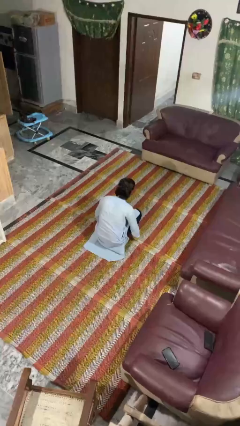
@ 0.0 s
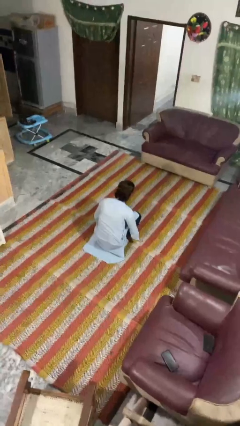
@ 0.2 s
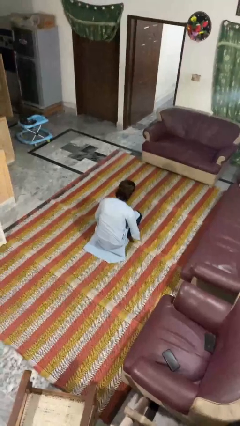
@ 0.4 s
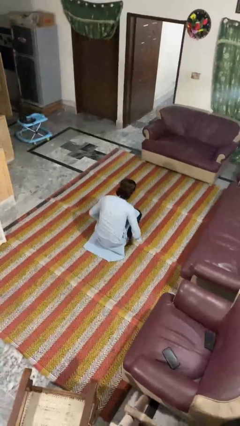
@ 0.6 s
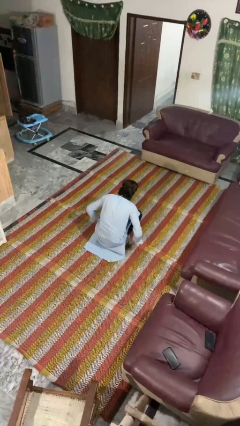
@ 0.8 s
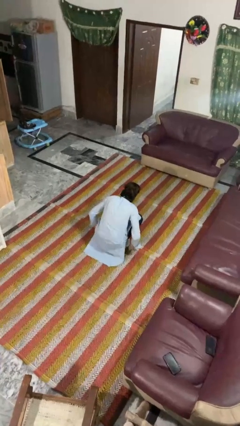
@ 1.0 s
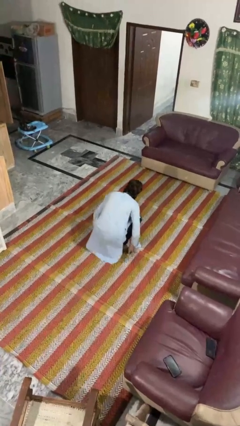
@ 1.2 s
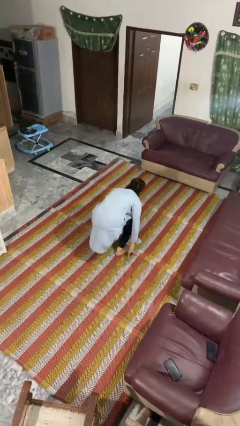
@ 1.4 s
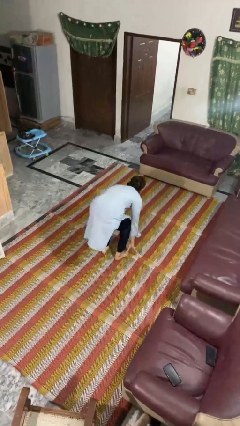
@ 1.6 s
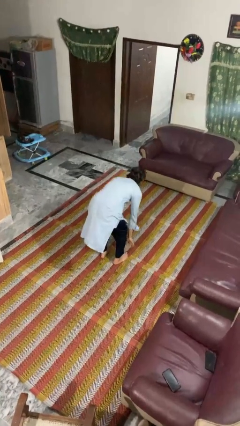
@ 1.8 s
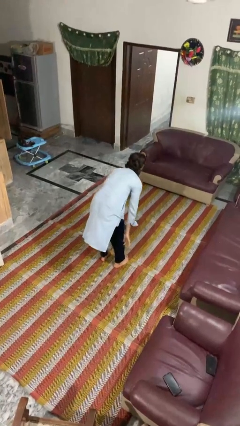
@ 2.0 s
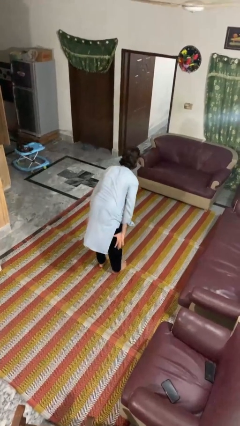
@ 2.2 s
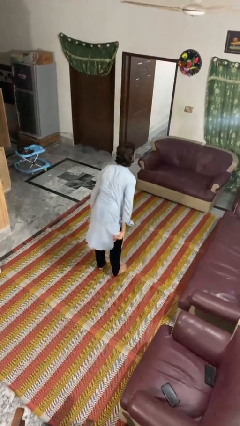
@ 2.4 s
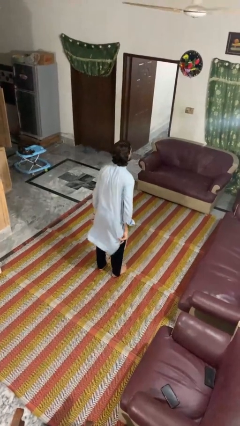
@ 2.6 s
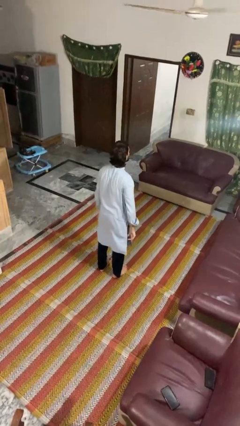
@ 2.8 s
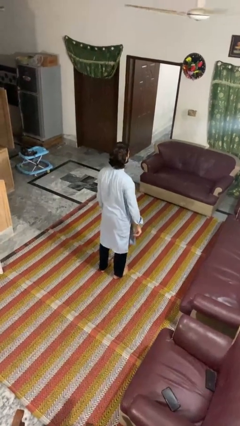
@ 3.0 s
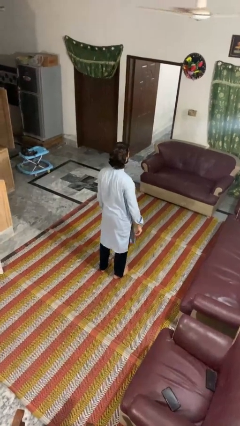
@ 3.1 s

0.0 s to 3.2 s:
person stands up

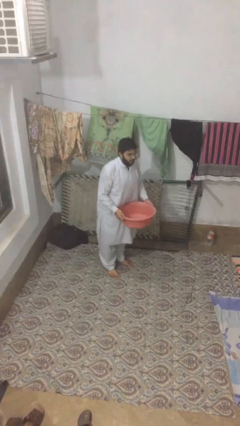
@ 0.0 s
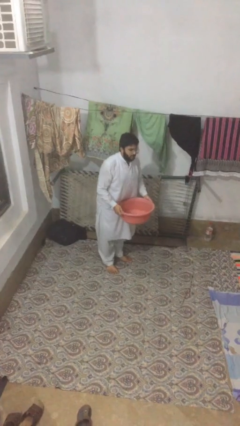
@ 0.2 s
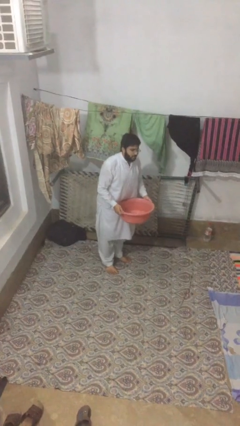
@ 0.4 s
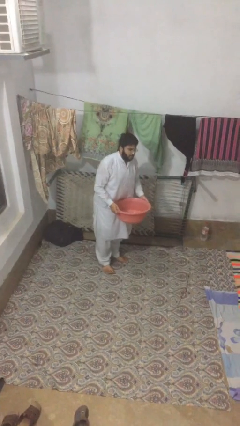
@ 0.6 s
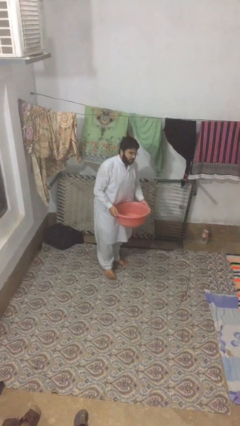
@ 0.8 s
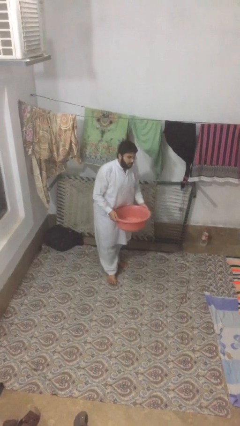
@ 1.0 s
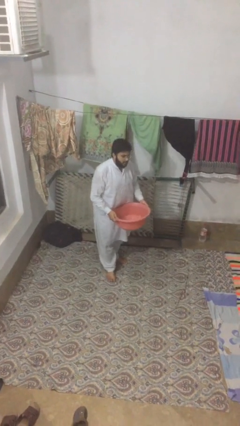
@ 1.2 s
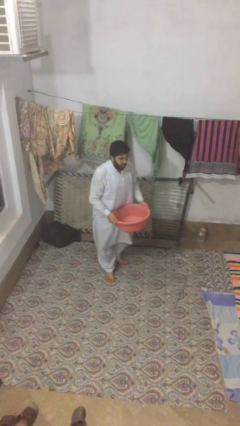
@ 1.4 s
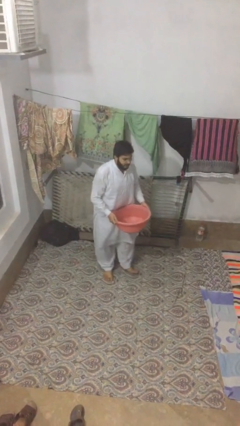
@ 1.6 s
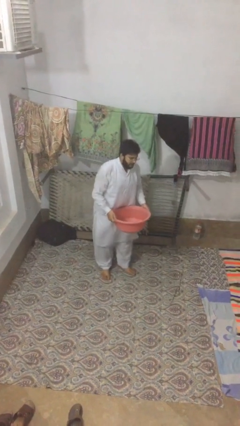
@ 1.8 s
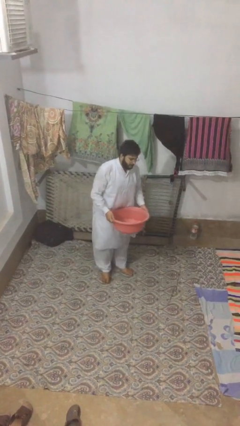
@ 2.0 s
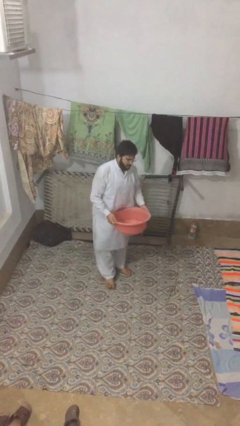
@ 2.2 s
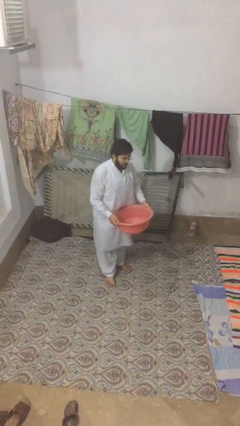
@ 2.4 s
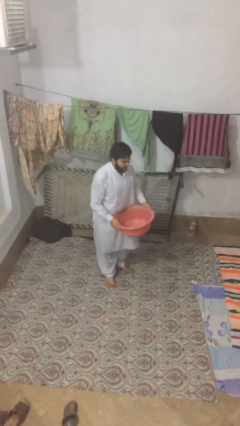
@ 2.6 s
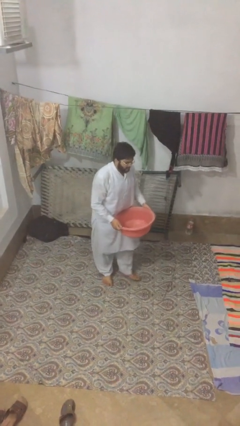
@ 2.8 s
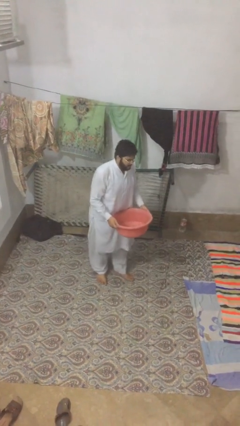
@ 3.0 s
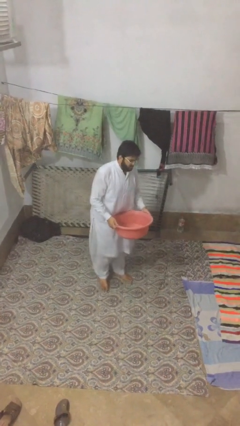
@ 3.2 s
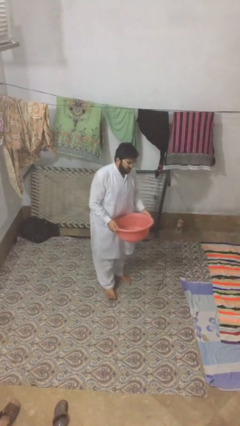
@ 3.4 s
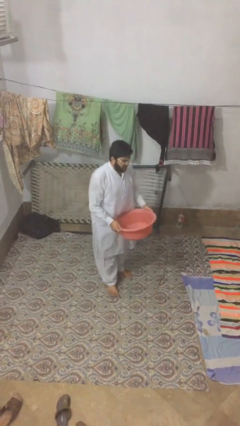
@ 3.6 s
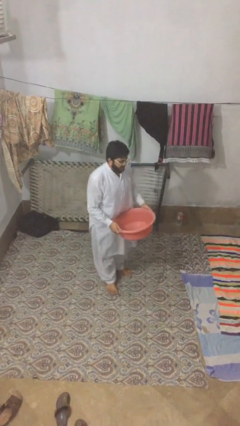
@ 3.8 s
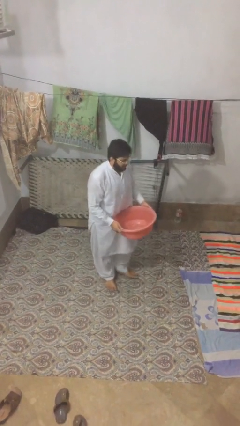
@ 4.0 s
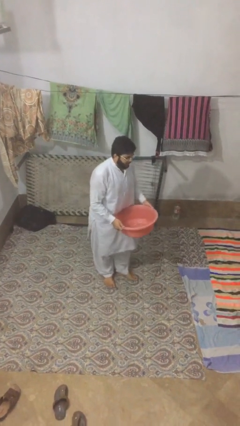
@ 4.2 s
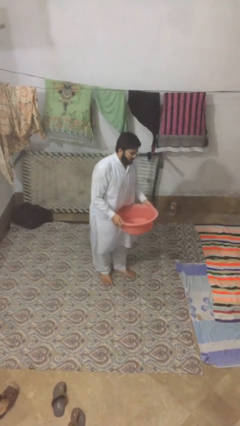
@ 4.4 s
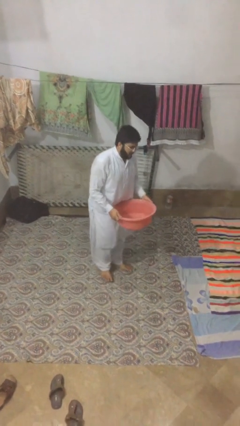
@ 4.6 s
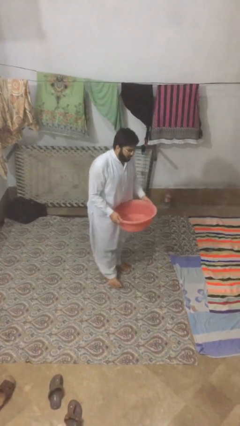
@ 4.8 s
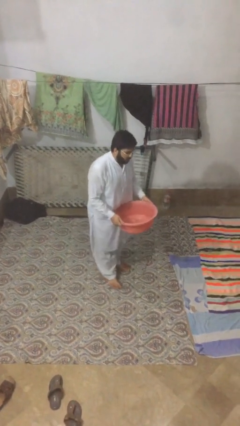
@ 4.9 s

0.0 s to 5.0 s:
person carries heavy object

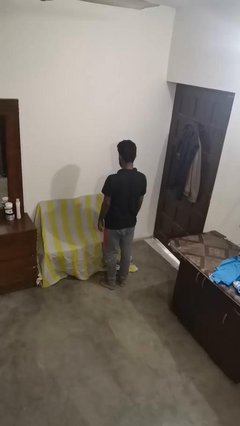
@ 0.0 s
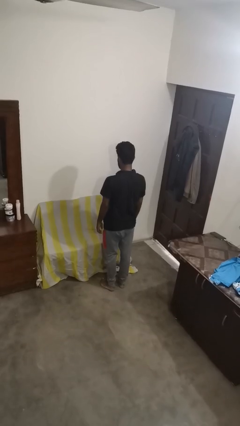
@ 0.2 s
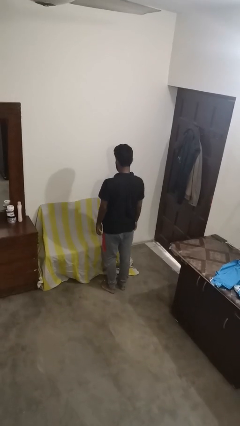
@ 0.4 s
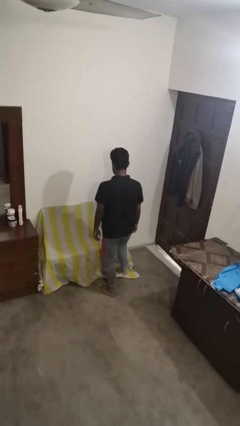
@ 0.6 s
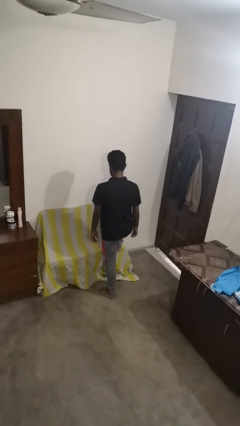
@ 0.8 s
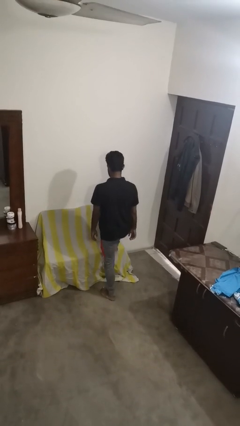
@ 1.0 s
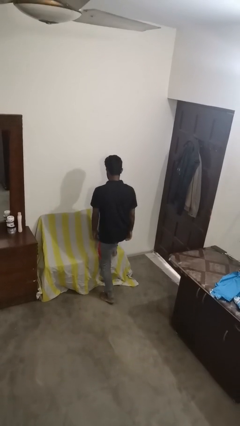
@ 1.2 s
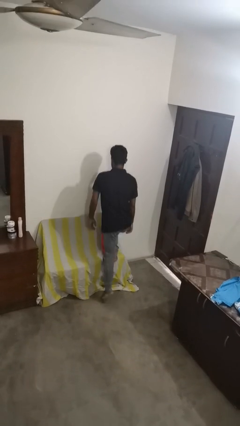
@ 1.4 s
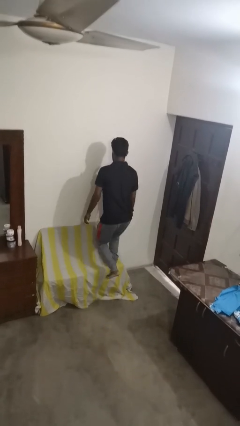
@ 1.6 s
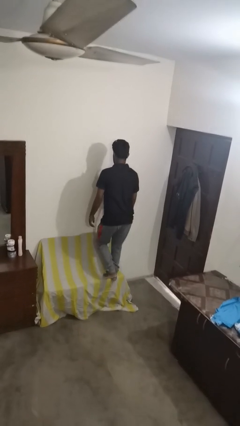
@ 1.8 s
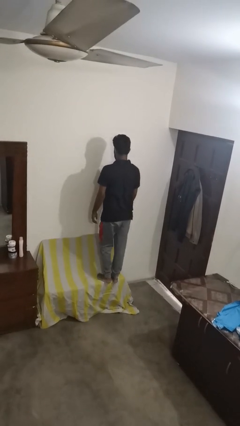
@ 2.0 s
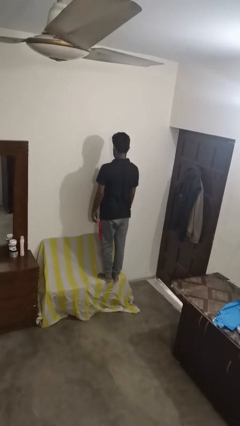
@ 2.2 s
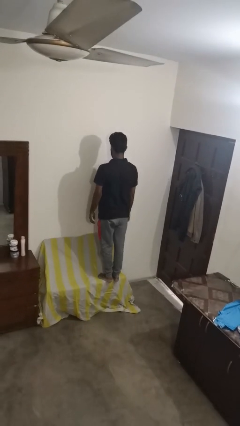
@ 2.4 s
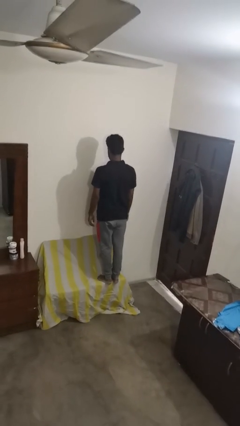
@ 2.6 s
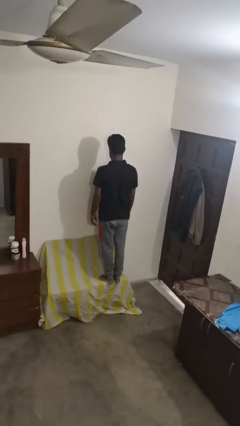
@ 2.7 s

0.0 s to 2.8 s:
person climbs on couch

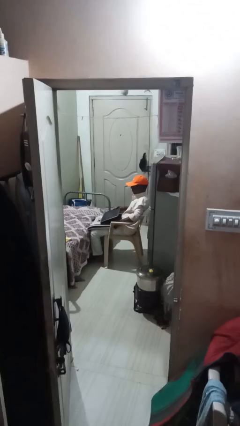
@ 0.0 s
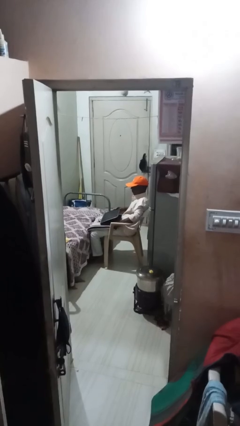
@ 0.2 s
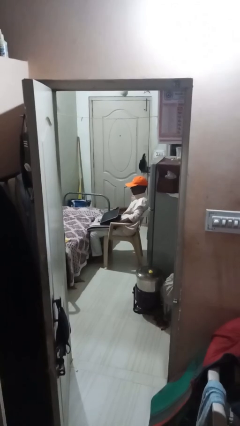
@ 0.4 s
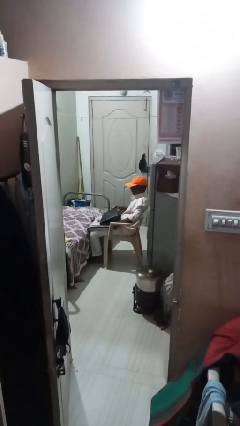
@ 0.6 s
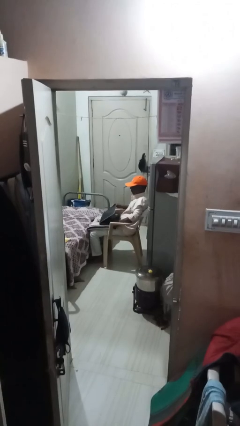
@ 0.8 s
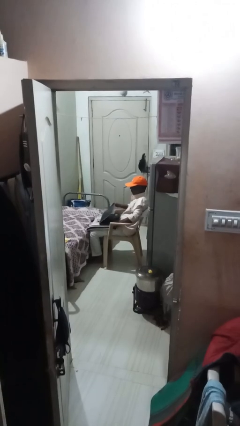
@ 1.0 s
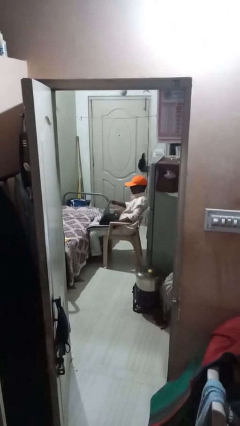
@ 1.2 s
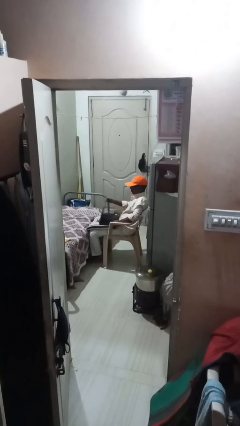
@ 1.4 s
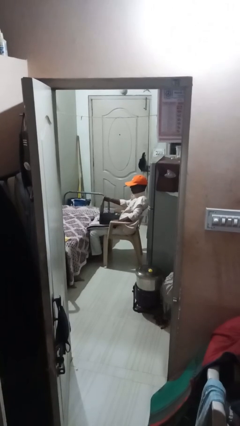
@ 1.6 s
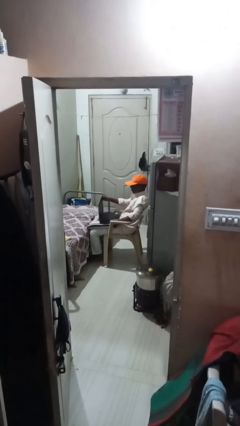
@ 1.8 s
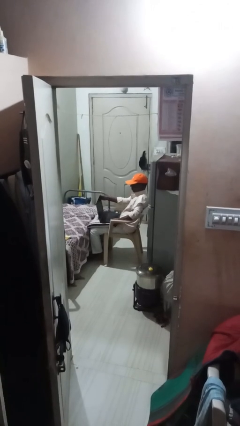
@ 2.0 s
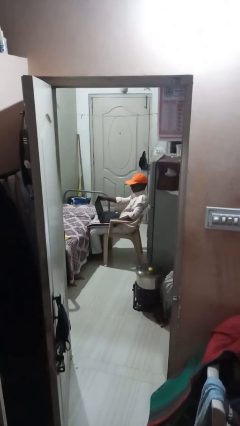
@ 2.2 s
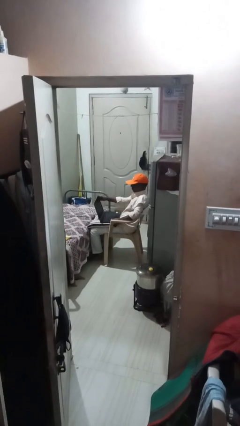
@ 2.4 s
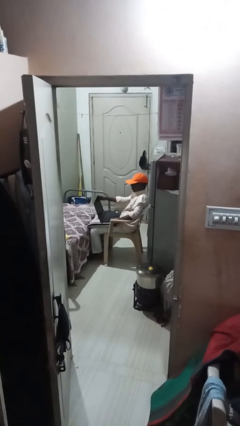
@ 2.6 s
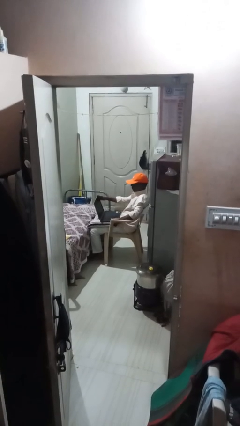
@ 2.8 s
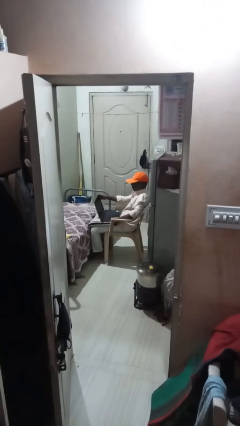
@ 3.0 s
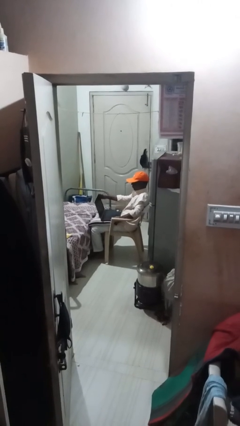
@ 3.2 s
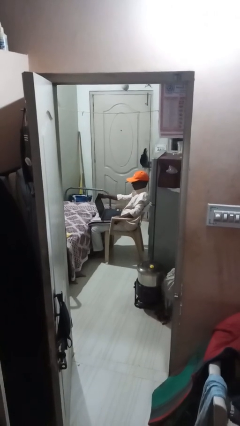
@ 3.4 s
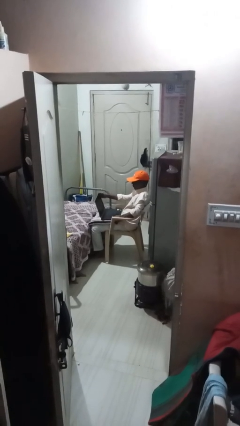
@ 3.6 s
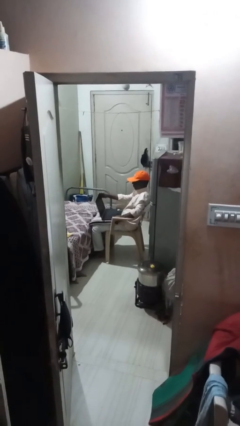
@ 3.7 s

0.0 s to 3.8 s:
person interacts with laptop

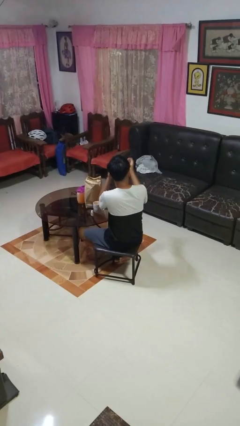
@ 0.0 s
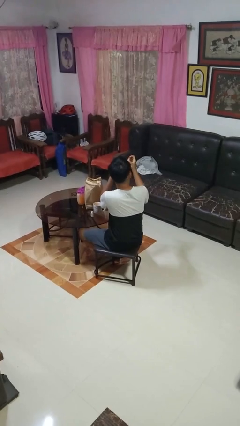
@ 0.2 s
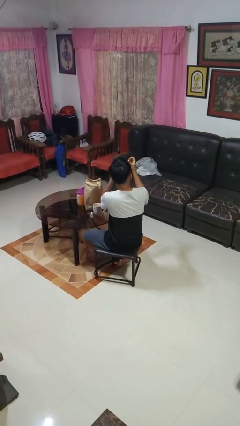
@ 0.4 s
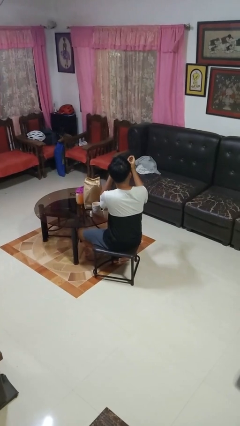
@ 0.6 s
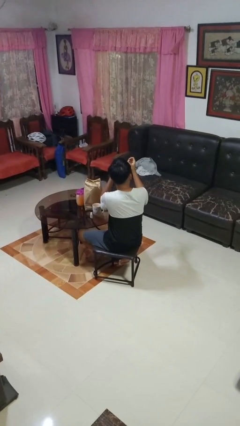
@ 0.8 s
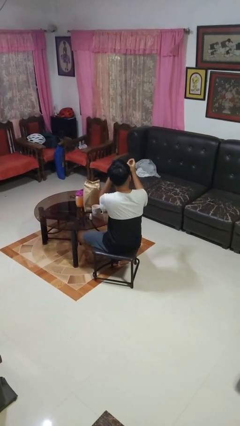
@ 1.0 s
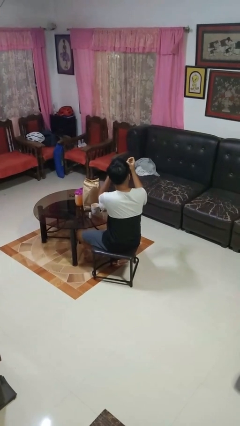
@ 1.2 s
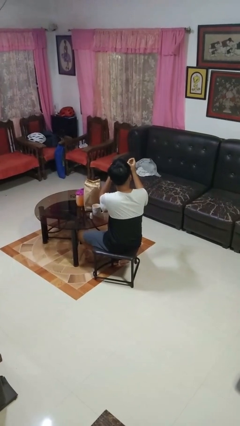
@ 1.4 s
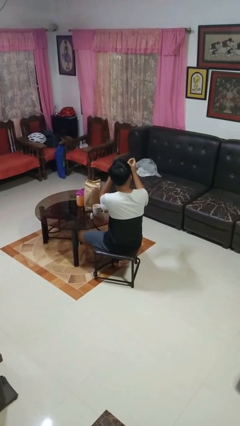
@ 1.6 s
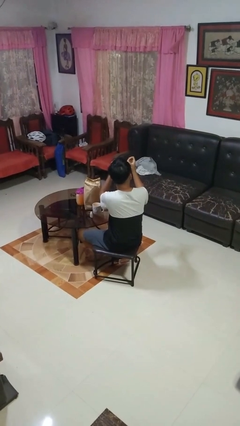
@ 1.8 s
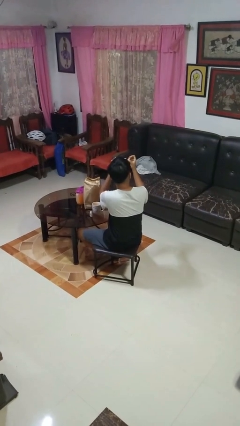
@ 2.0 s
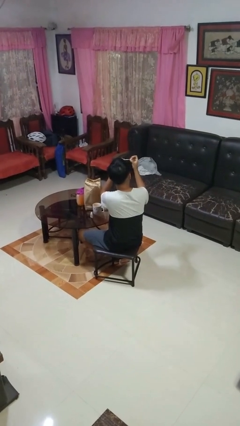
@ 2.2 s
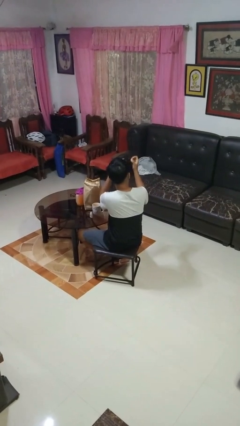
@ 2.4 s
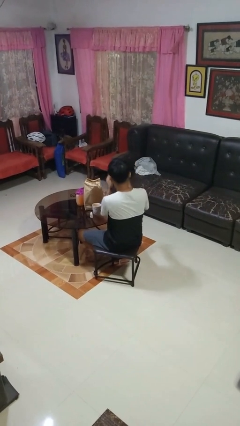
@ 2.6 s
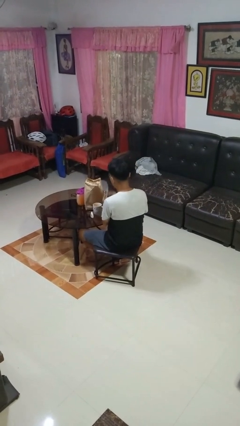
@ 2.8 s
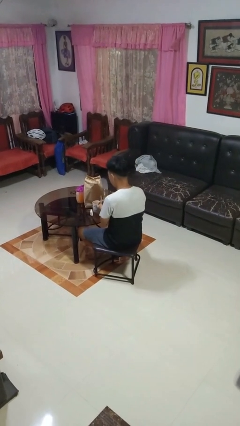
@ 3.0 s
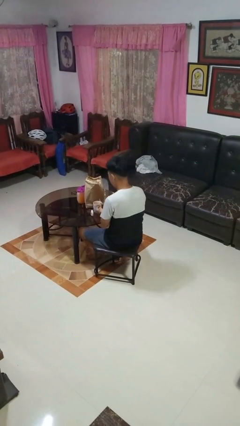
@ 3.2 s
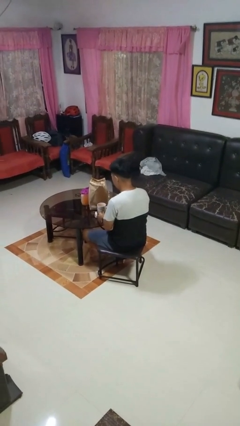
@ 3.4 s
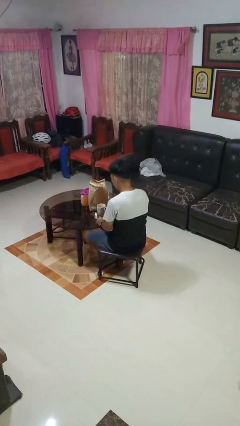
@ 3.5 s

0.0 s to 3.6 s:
person paints fingernails
